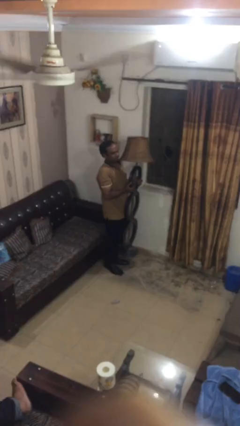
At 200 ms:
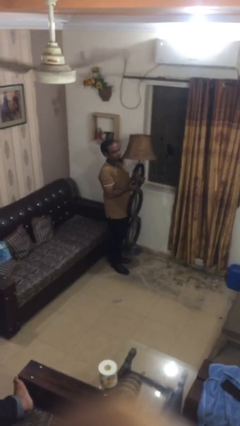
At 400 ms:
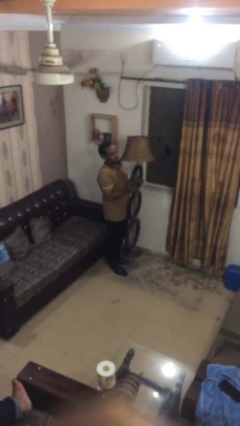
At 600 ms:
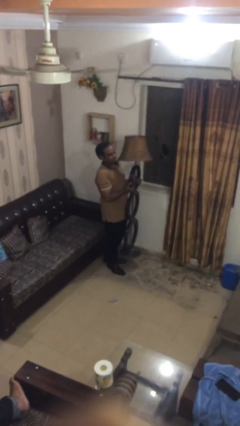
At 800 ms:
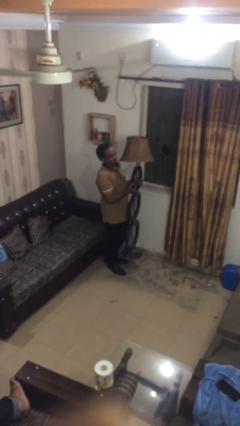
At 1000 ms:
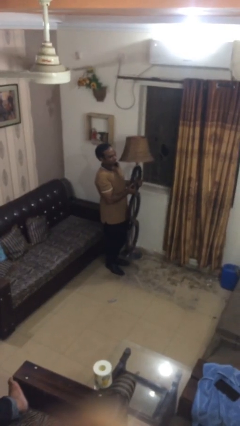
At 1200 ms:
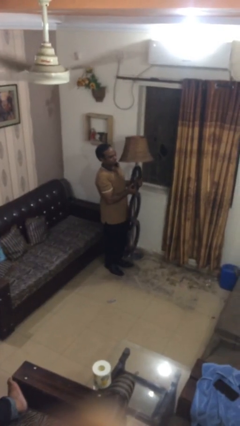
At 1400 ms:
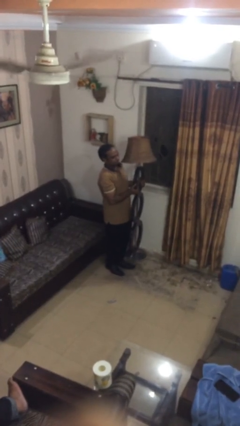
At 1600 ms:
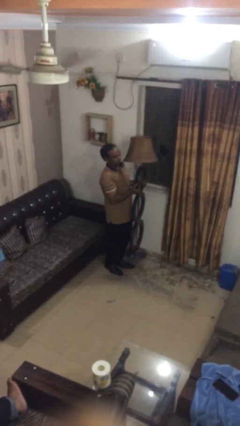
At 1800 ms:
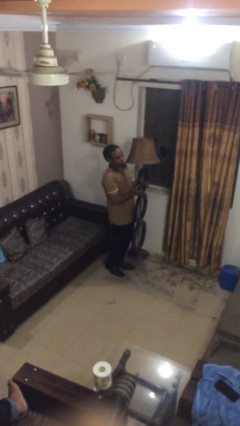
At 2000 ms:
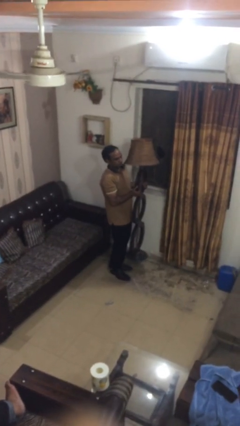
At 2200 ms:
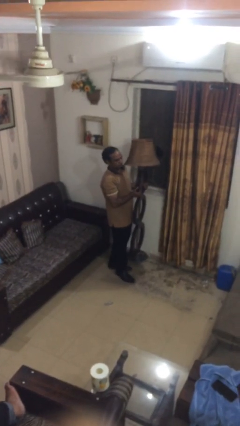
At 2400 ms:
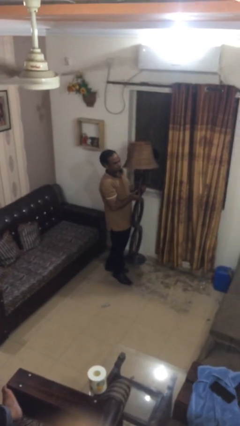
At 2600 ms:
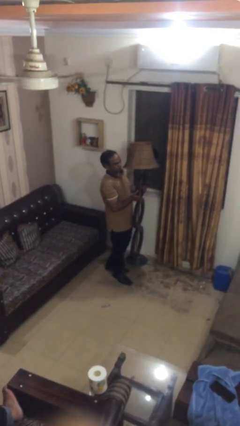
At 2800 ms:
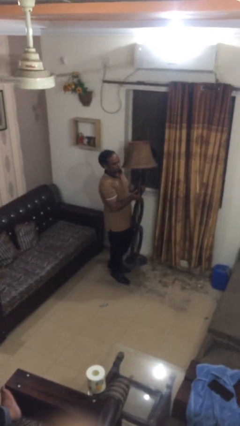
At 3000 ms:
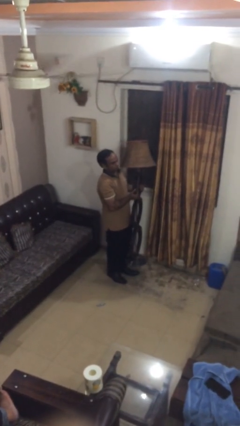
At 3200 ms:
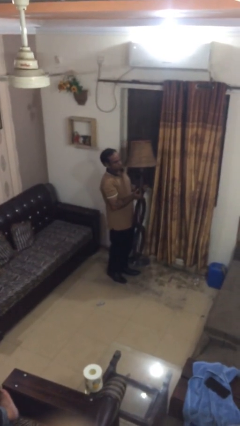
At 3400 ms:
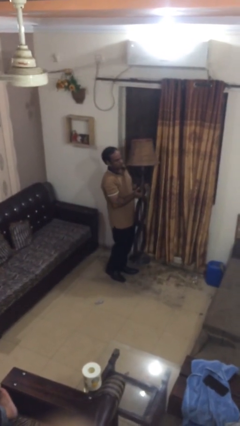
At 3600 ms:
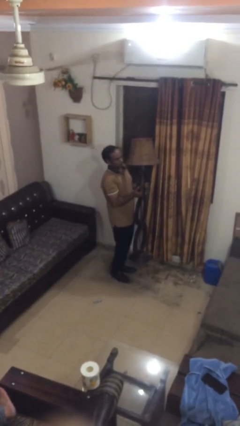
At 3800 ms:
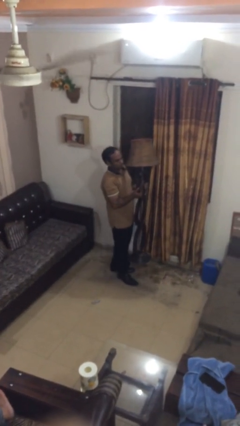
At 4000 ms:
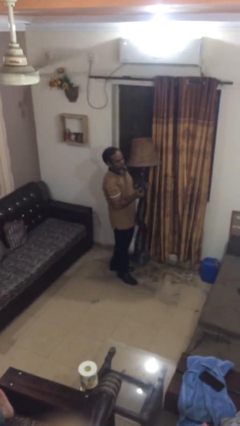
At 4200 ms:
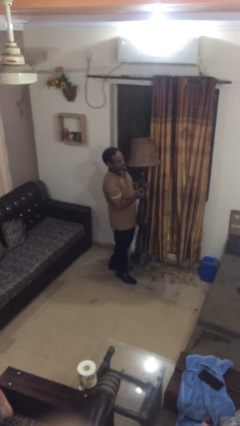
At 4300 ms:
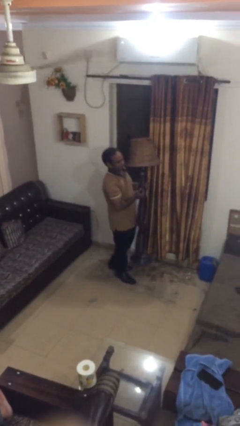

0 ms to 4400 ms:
person carries heavy object

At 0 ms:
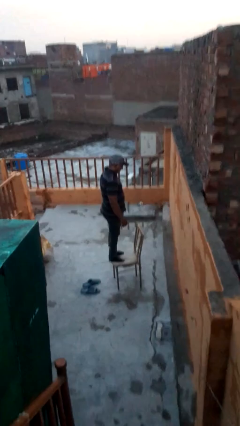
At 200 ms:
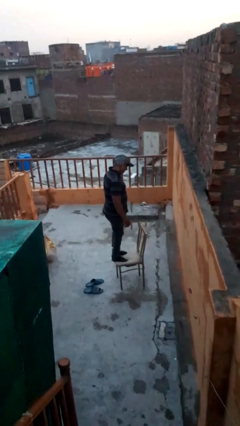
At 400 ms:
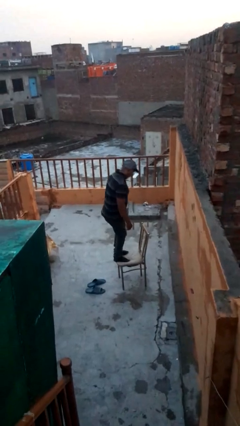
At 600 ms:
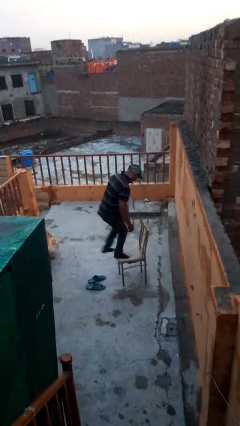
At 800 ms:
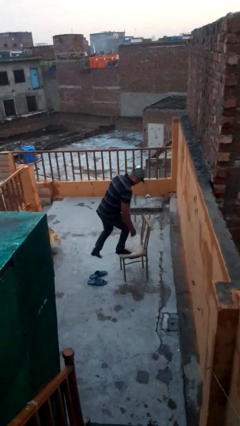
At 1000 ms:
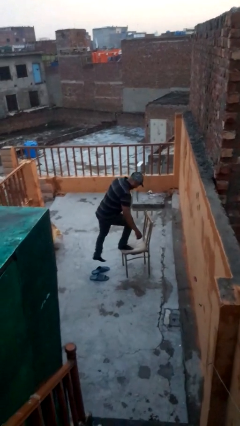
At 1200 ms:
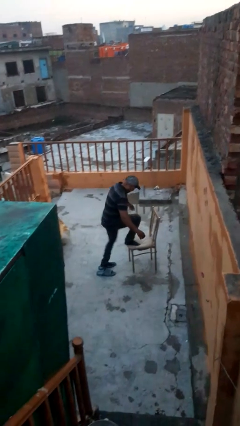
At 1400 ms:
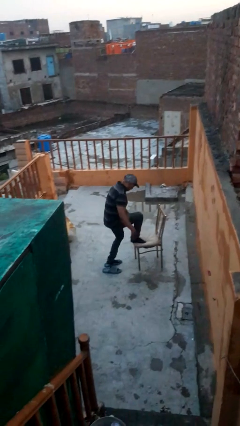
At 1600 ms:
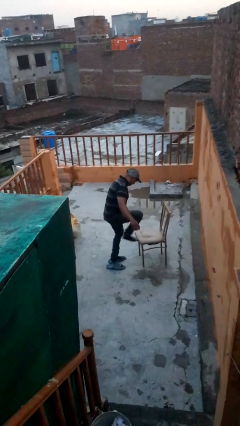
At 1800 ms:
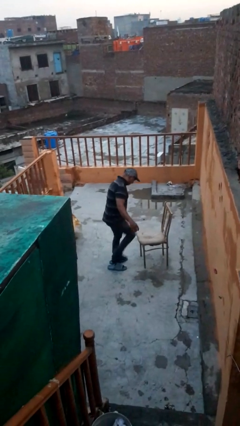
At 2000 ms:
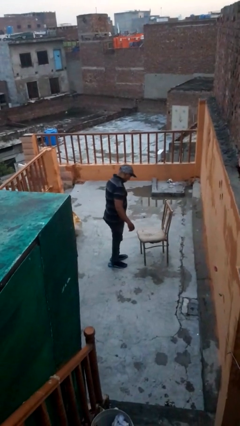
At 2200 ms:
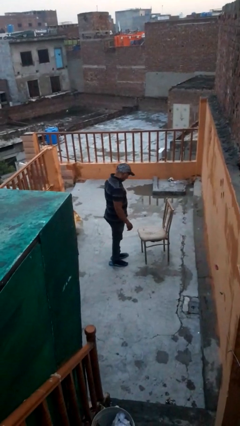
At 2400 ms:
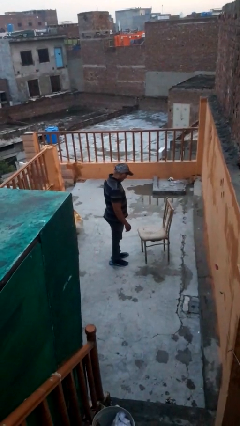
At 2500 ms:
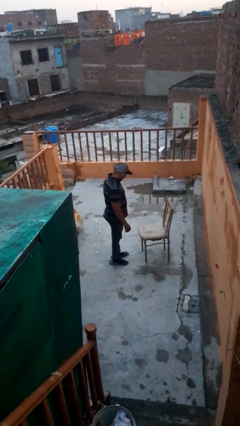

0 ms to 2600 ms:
person climbs off chair

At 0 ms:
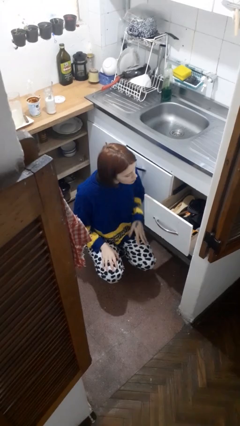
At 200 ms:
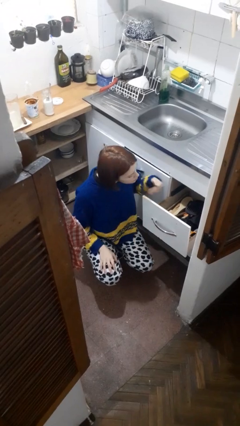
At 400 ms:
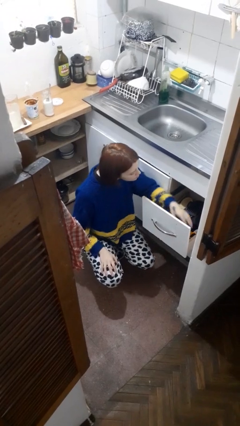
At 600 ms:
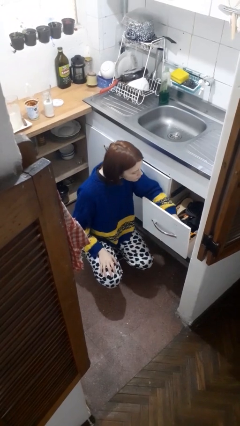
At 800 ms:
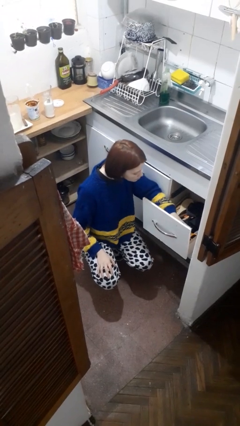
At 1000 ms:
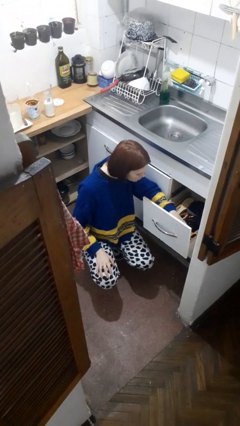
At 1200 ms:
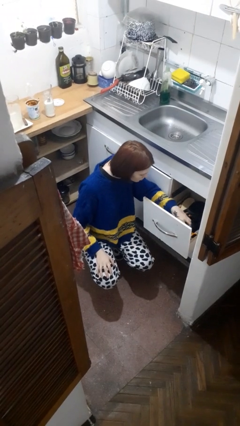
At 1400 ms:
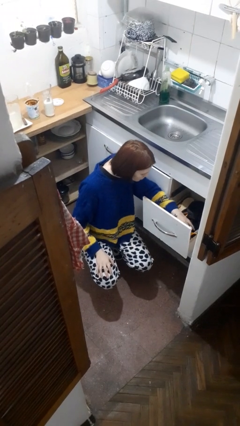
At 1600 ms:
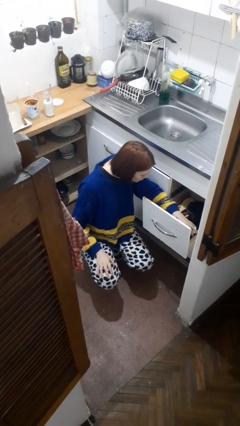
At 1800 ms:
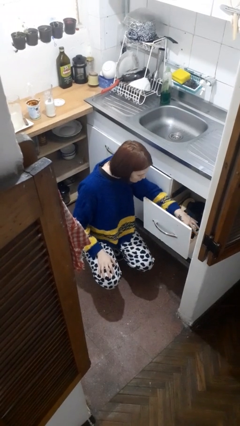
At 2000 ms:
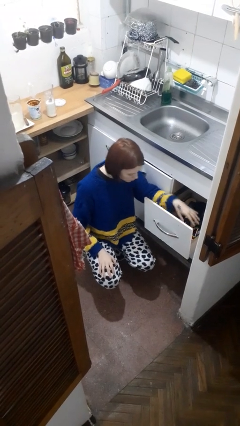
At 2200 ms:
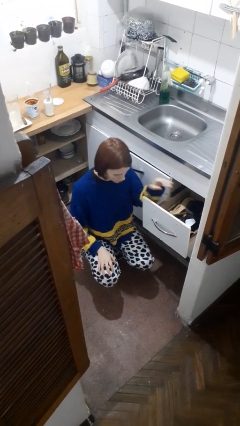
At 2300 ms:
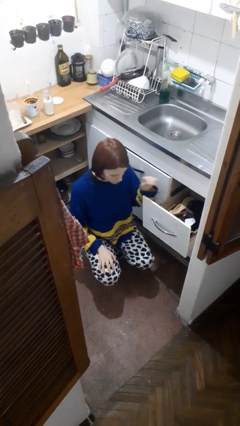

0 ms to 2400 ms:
person searches in kitchen drawer

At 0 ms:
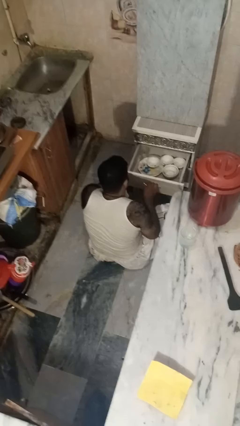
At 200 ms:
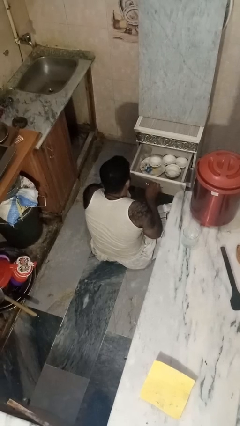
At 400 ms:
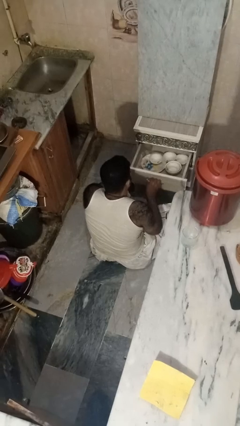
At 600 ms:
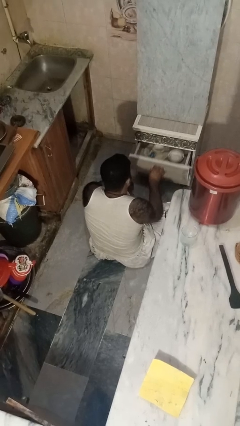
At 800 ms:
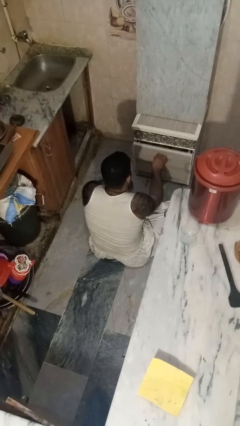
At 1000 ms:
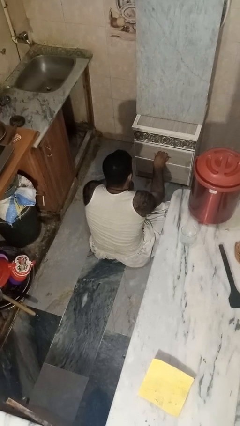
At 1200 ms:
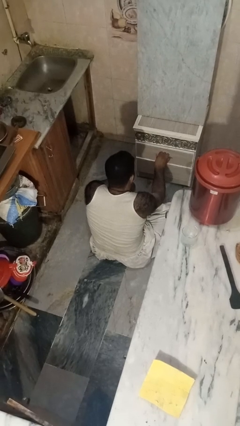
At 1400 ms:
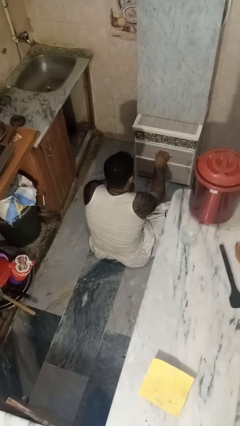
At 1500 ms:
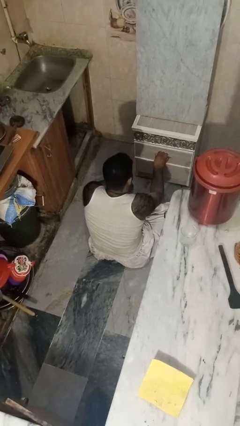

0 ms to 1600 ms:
person closes kitchen drawer

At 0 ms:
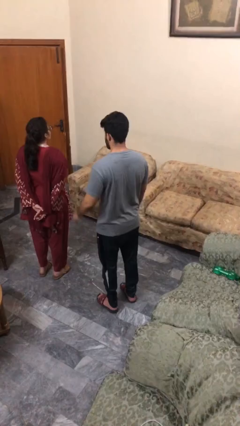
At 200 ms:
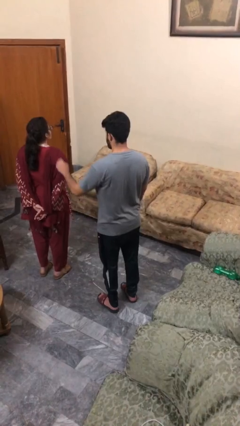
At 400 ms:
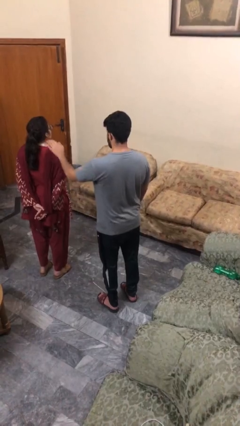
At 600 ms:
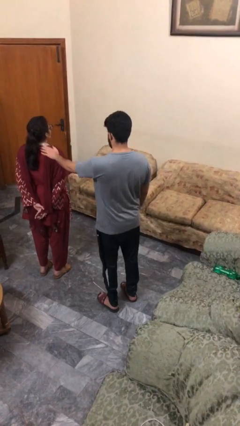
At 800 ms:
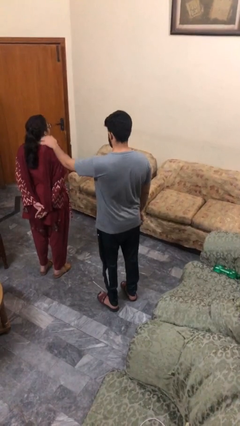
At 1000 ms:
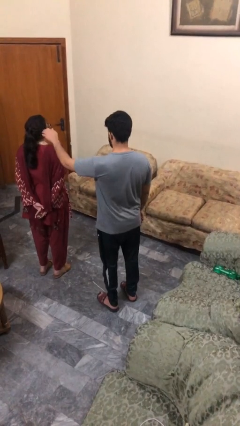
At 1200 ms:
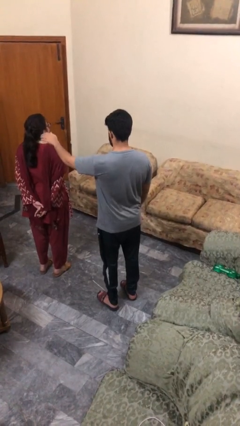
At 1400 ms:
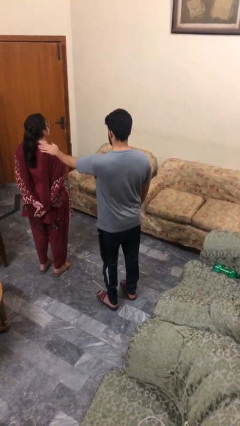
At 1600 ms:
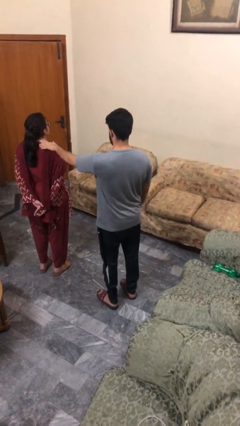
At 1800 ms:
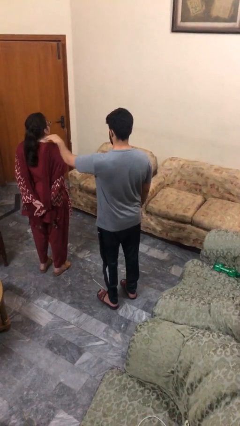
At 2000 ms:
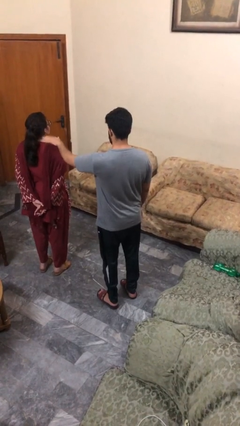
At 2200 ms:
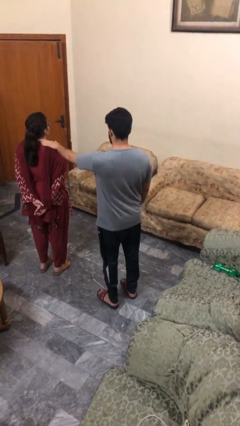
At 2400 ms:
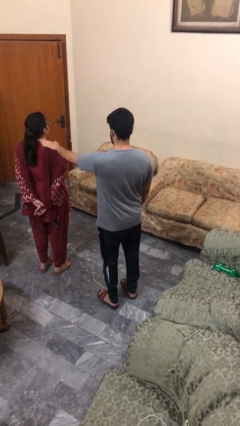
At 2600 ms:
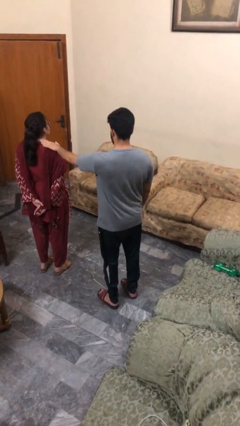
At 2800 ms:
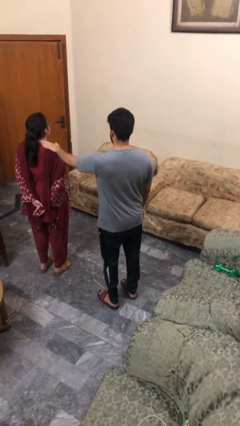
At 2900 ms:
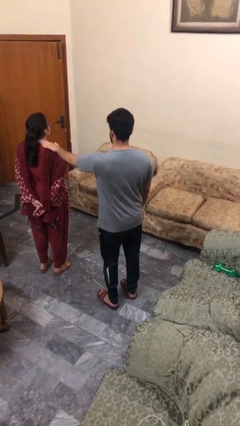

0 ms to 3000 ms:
person pounds shoulders of person

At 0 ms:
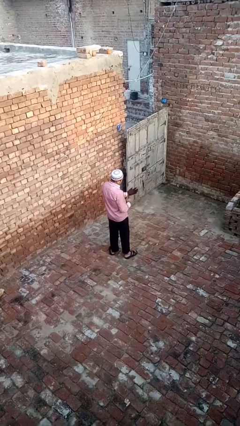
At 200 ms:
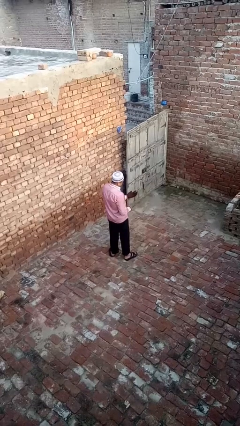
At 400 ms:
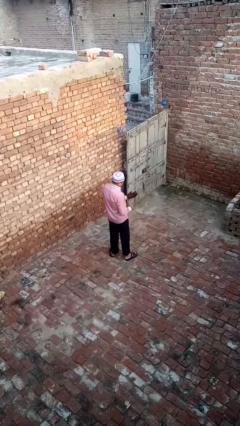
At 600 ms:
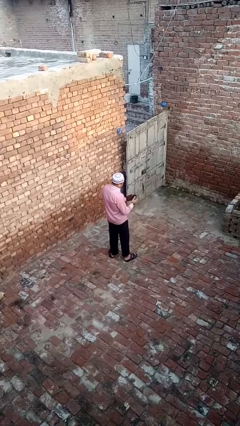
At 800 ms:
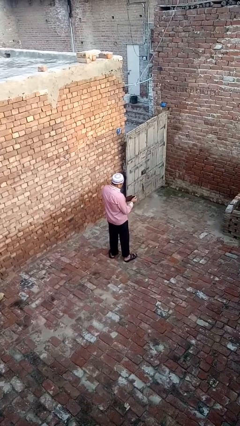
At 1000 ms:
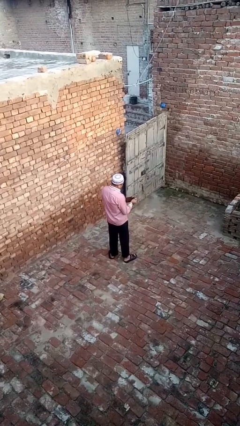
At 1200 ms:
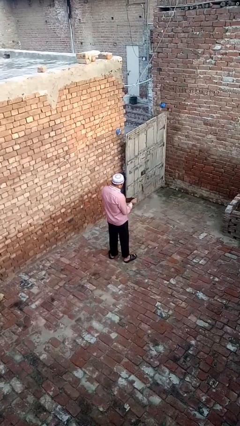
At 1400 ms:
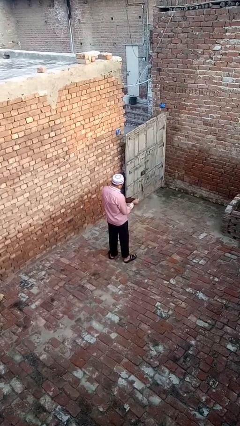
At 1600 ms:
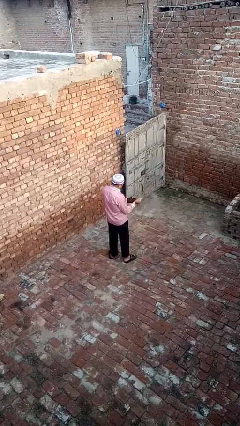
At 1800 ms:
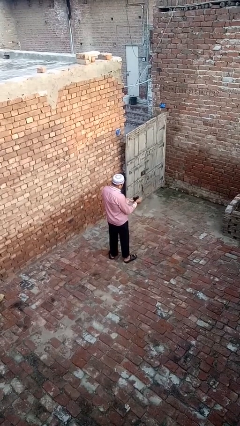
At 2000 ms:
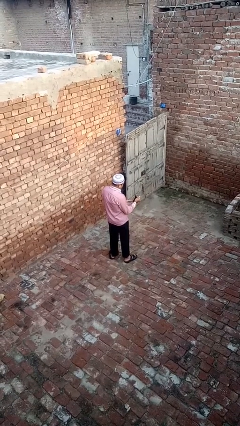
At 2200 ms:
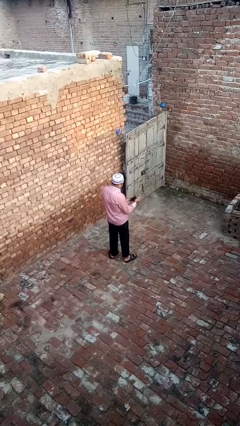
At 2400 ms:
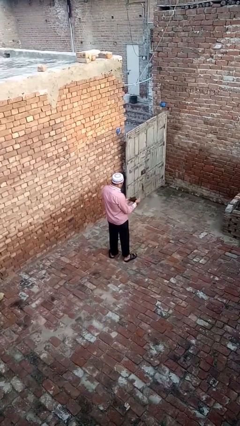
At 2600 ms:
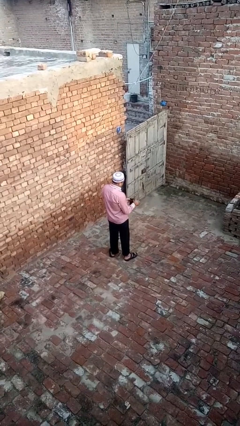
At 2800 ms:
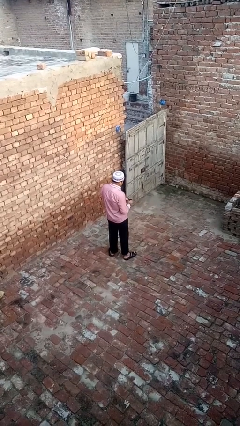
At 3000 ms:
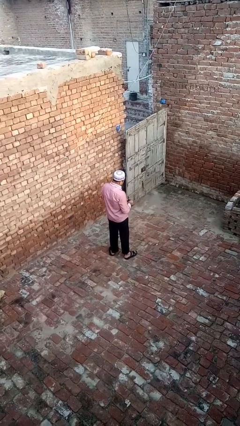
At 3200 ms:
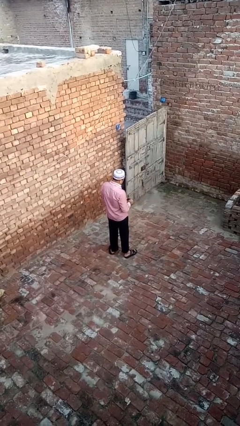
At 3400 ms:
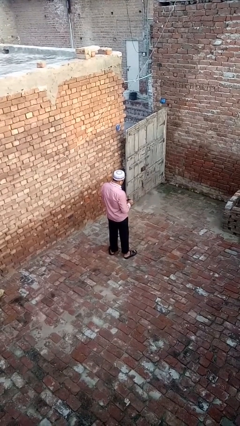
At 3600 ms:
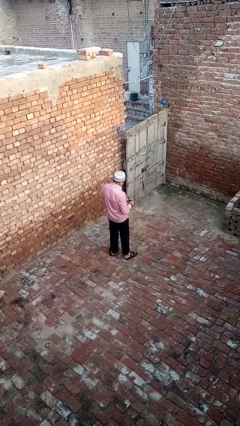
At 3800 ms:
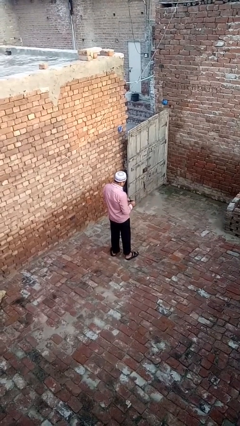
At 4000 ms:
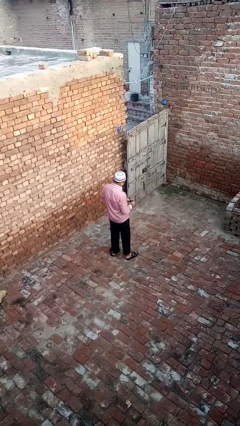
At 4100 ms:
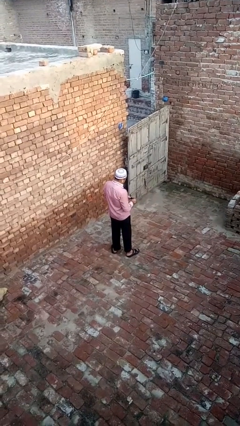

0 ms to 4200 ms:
person takes off gloves
